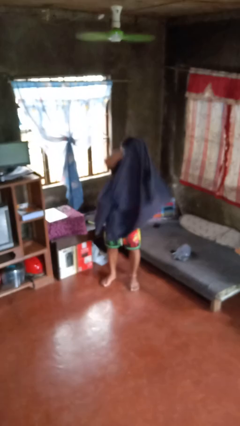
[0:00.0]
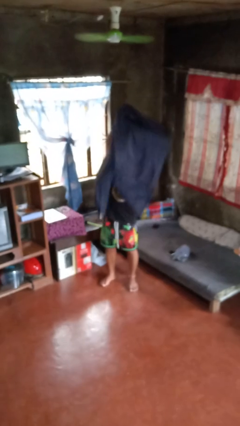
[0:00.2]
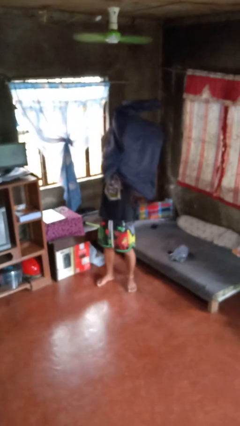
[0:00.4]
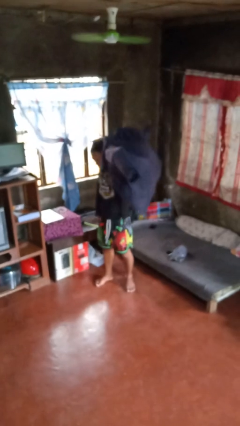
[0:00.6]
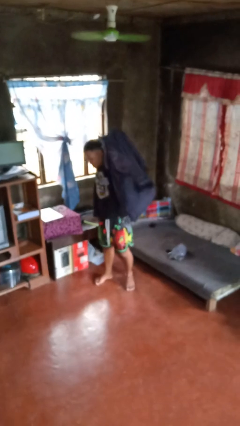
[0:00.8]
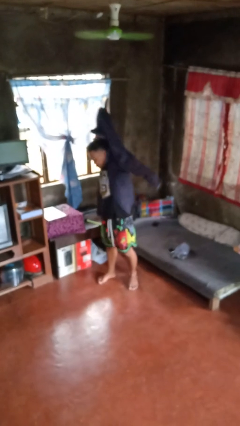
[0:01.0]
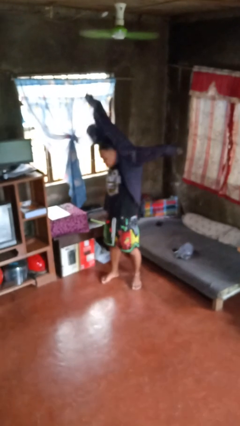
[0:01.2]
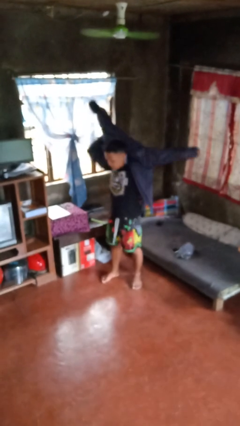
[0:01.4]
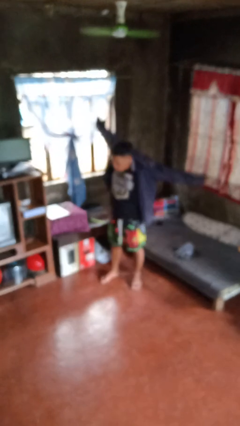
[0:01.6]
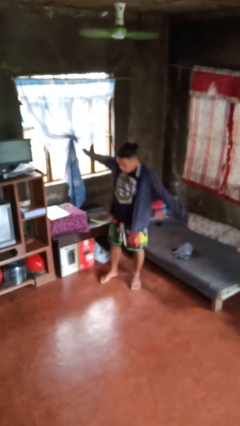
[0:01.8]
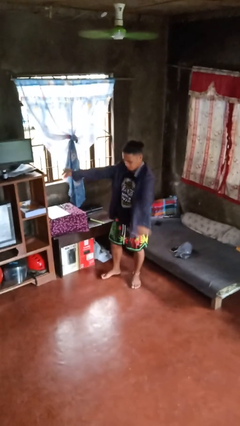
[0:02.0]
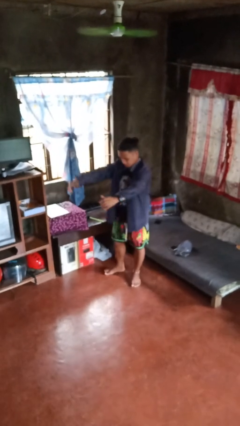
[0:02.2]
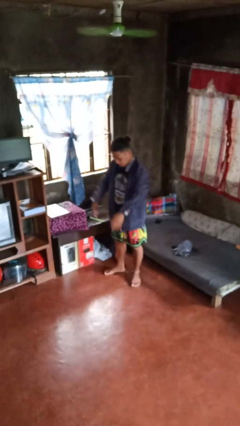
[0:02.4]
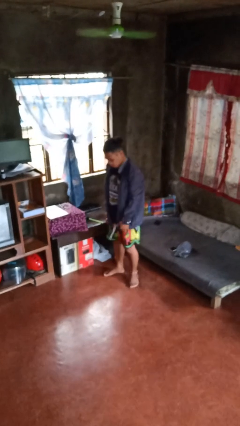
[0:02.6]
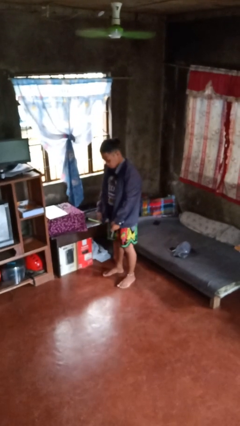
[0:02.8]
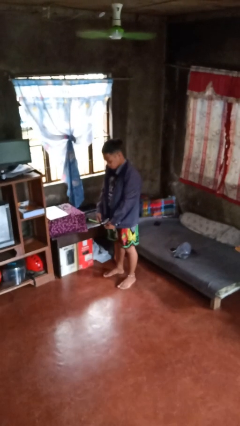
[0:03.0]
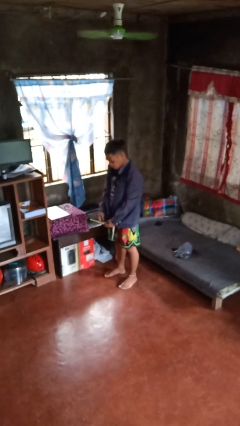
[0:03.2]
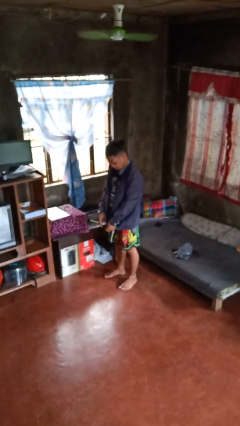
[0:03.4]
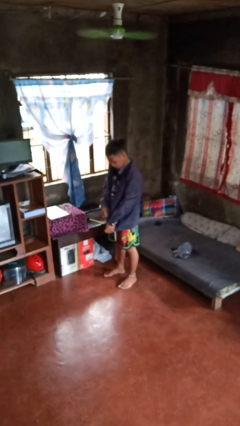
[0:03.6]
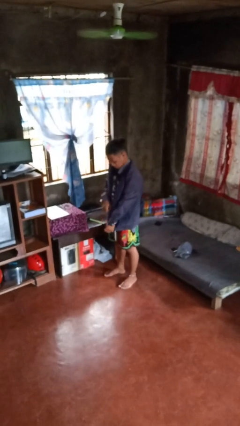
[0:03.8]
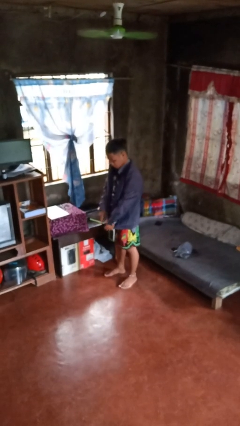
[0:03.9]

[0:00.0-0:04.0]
person puts on jacket

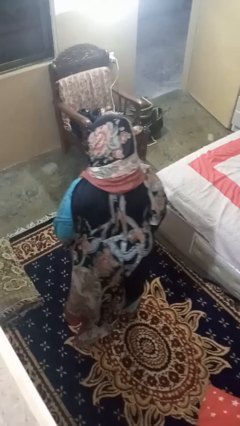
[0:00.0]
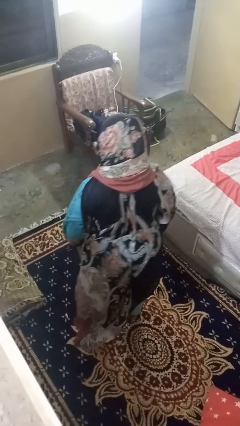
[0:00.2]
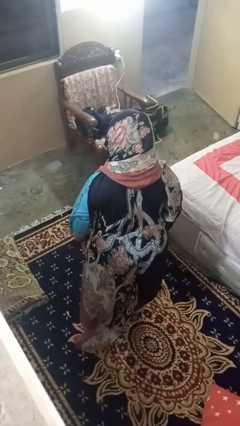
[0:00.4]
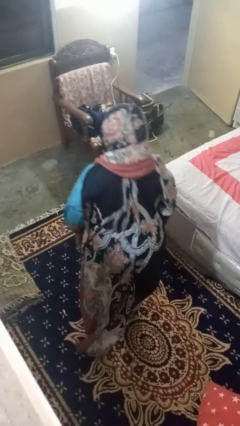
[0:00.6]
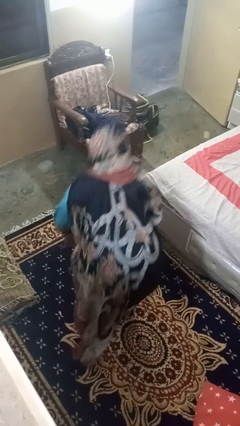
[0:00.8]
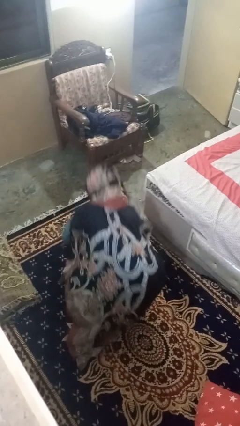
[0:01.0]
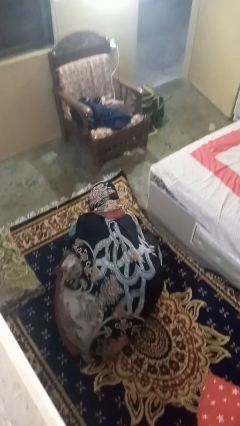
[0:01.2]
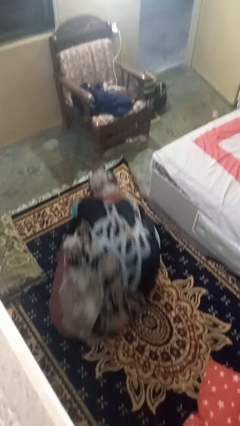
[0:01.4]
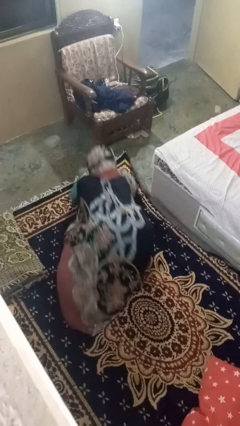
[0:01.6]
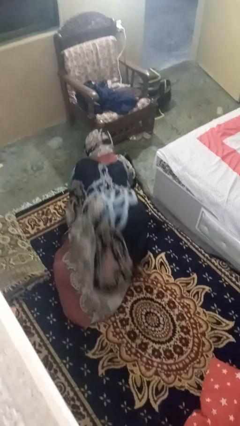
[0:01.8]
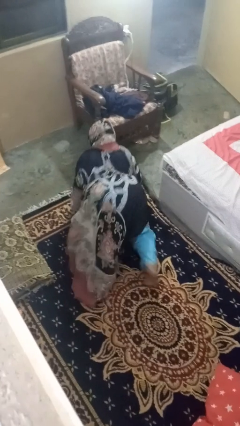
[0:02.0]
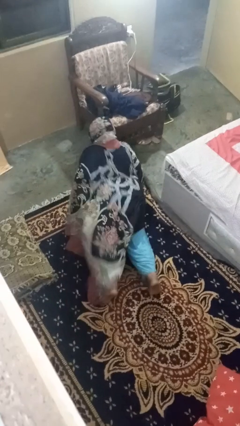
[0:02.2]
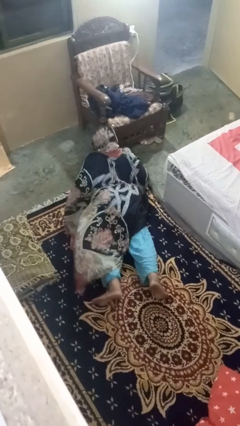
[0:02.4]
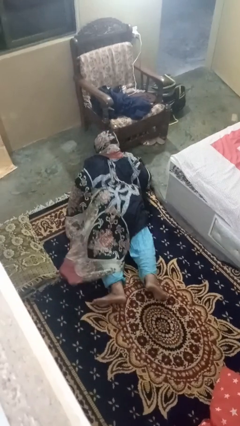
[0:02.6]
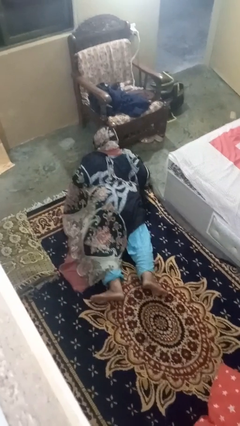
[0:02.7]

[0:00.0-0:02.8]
person exercises with pushup

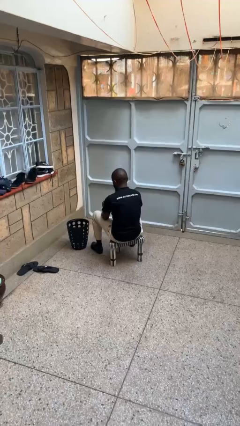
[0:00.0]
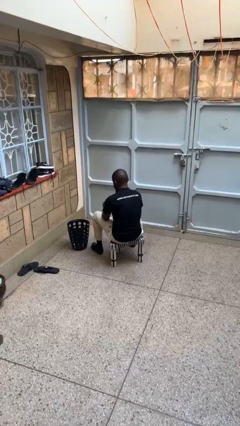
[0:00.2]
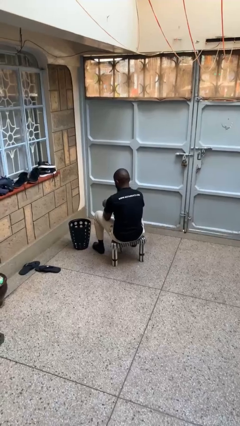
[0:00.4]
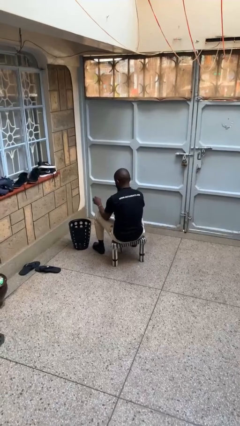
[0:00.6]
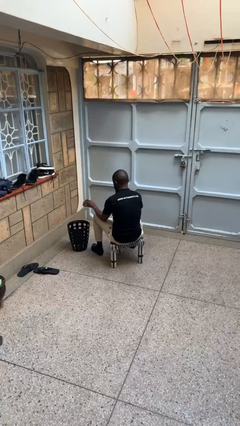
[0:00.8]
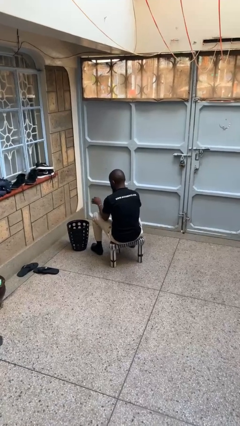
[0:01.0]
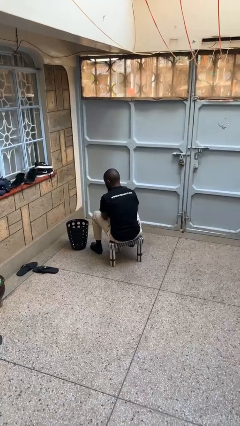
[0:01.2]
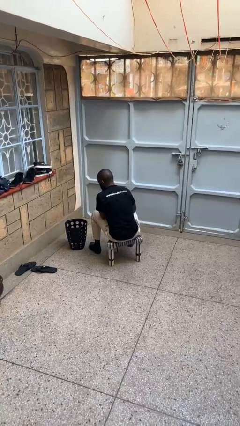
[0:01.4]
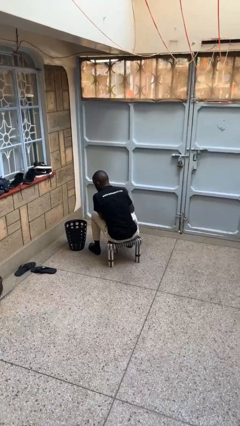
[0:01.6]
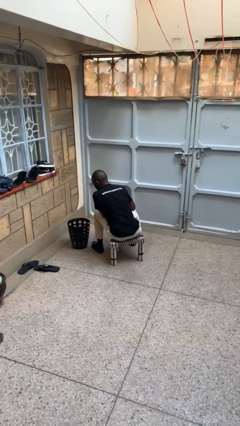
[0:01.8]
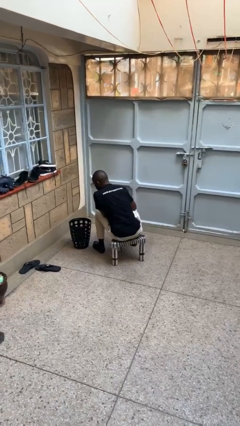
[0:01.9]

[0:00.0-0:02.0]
person discards trash

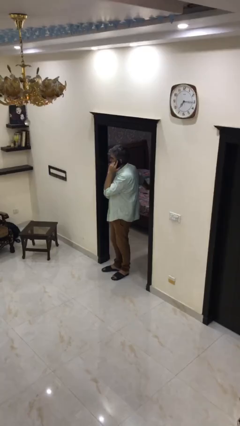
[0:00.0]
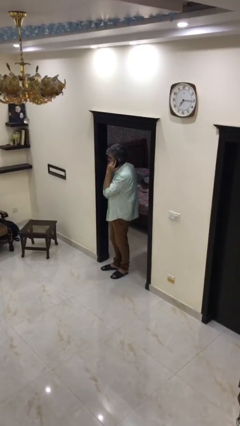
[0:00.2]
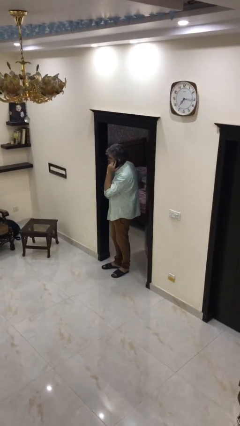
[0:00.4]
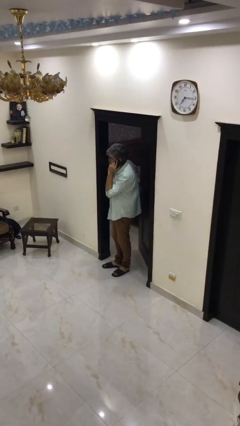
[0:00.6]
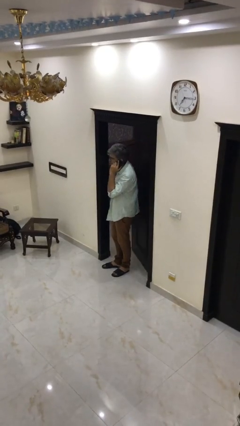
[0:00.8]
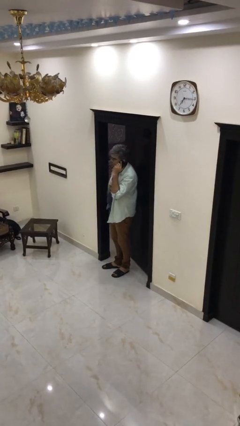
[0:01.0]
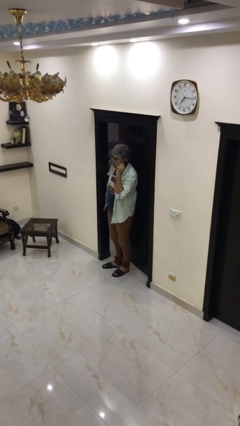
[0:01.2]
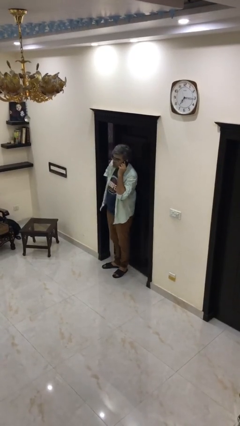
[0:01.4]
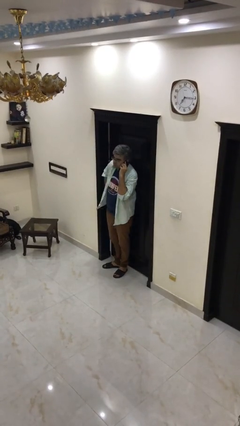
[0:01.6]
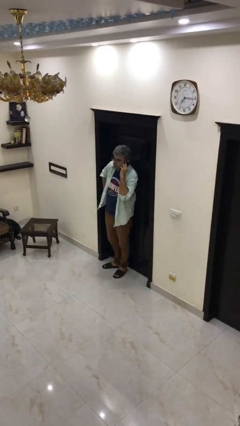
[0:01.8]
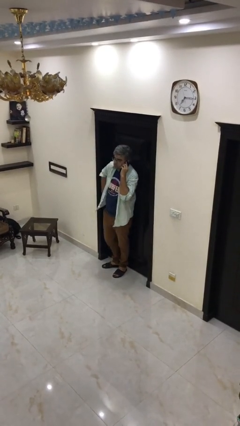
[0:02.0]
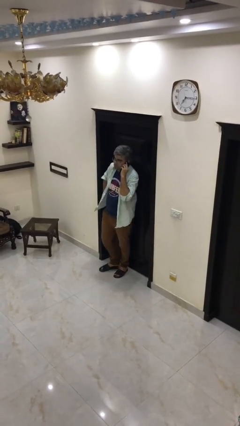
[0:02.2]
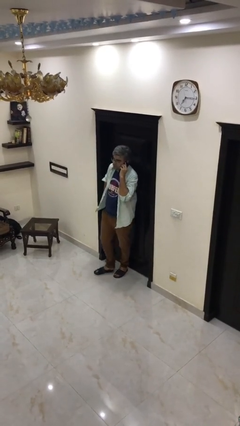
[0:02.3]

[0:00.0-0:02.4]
person closes facility door

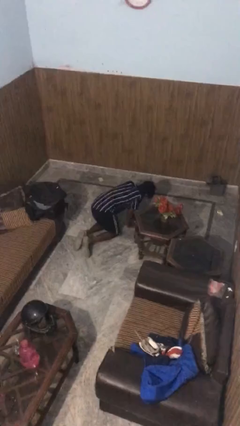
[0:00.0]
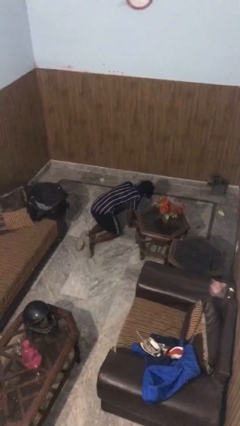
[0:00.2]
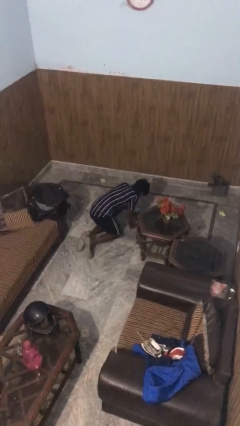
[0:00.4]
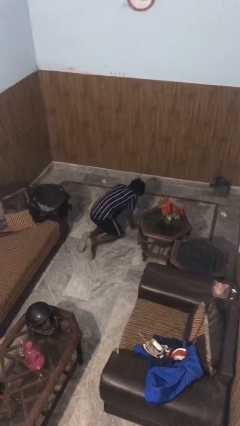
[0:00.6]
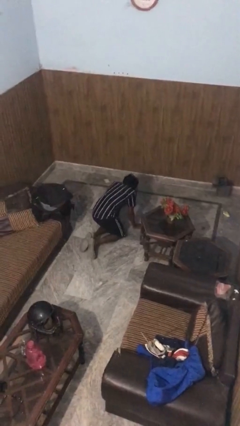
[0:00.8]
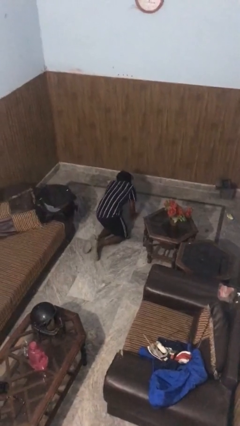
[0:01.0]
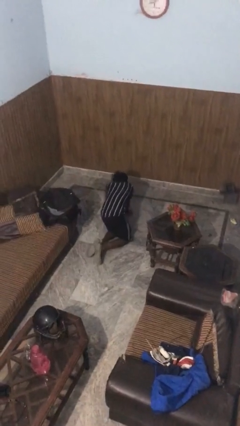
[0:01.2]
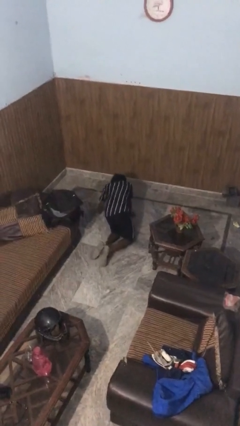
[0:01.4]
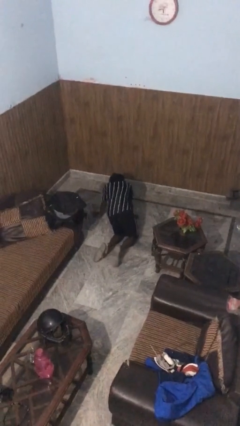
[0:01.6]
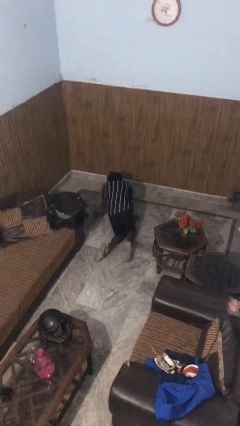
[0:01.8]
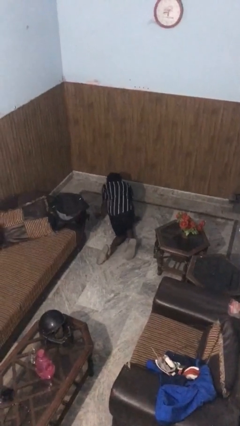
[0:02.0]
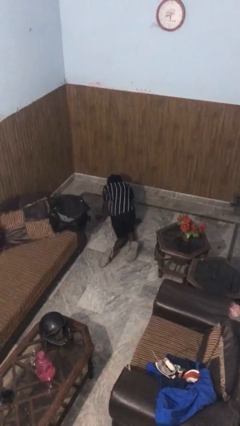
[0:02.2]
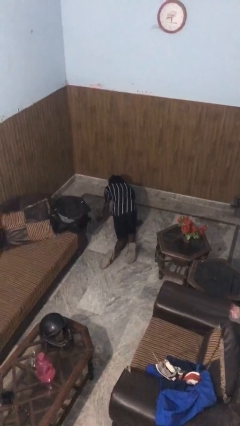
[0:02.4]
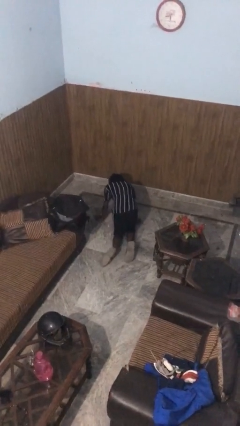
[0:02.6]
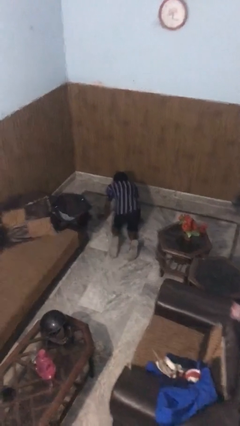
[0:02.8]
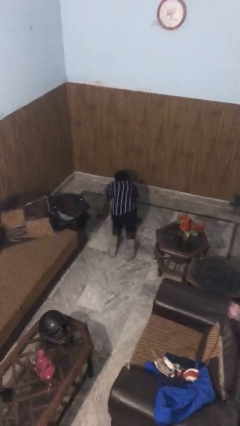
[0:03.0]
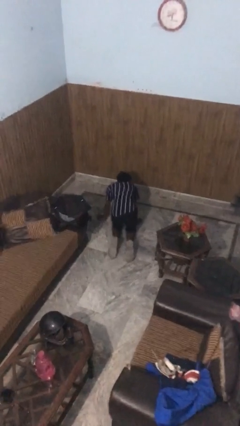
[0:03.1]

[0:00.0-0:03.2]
person crawls

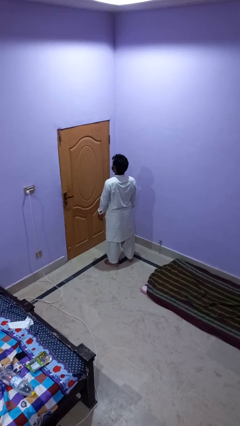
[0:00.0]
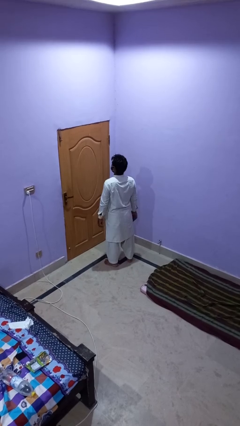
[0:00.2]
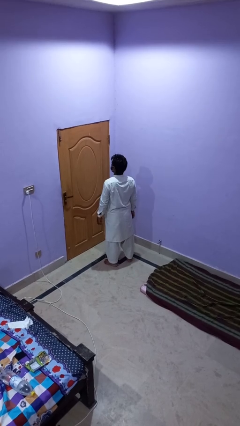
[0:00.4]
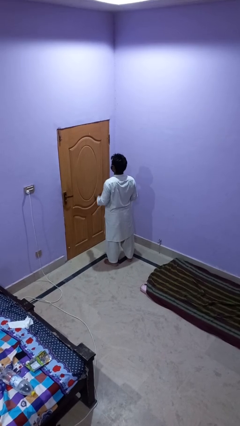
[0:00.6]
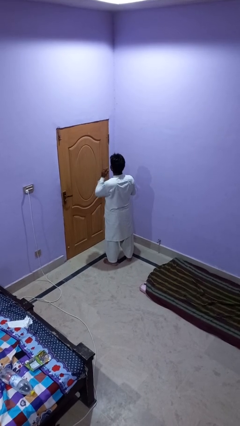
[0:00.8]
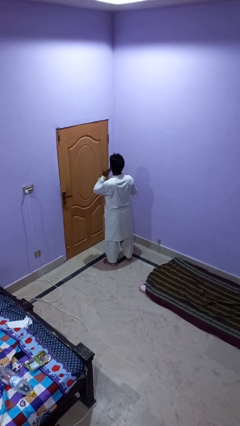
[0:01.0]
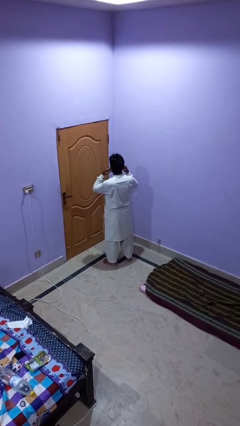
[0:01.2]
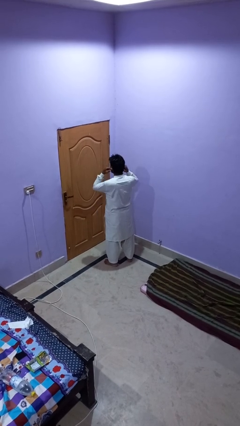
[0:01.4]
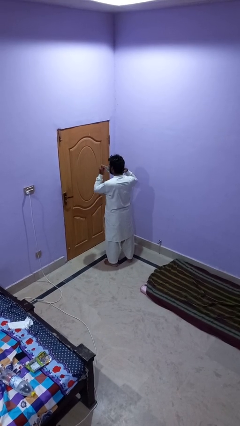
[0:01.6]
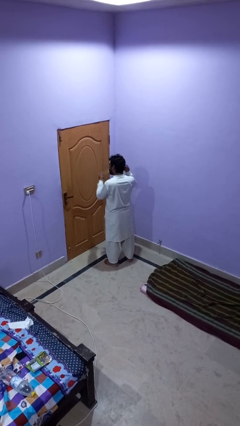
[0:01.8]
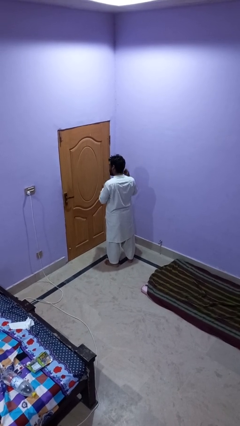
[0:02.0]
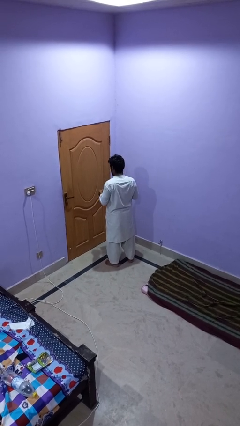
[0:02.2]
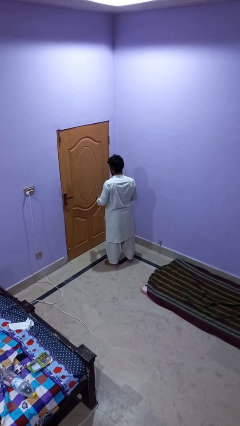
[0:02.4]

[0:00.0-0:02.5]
person takes off facemask

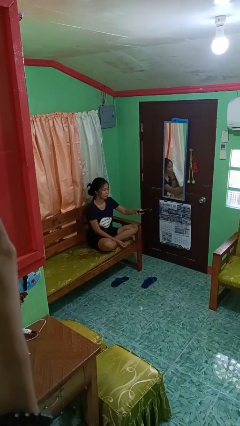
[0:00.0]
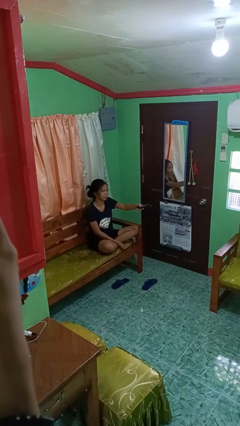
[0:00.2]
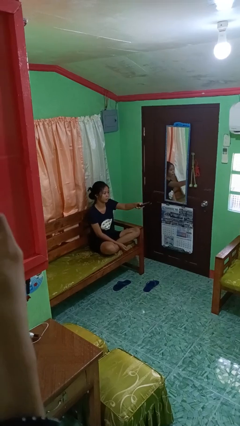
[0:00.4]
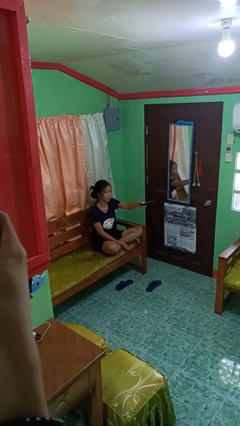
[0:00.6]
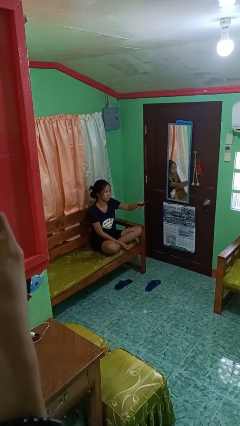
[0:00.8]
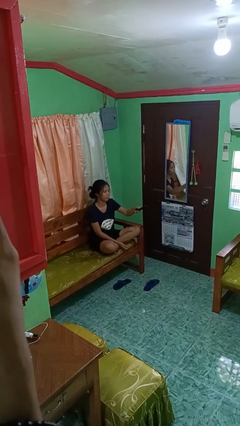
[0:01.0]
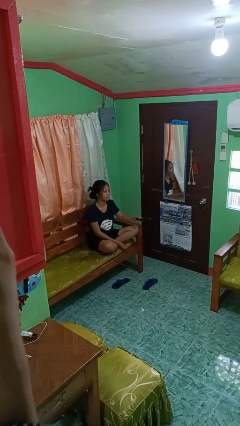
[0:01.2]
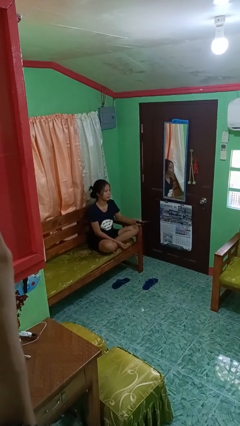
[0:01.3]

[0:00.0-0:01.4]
person uses television remote
